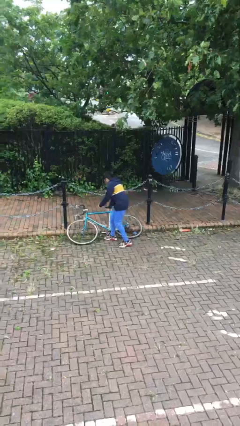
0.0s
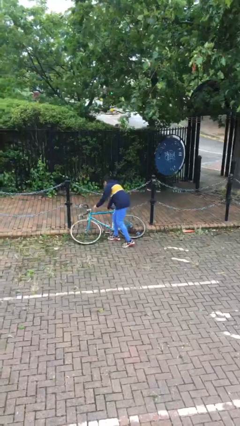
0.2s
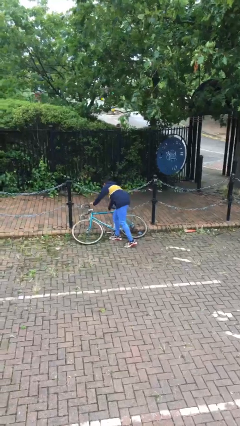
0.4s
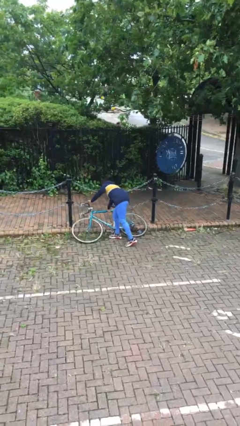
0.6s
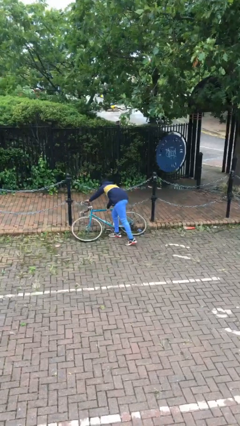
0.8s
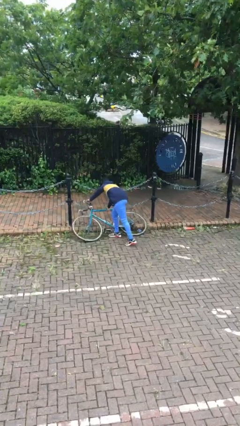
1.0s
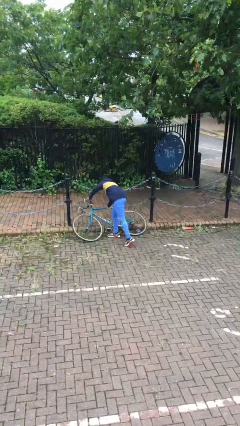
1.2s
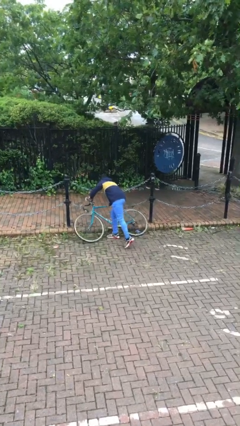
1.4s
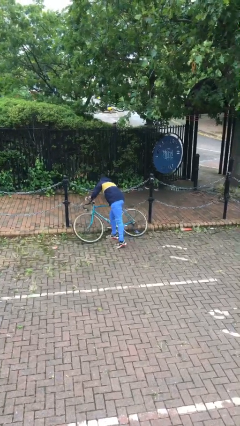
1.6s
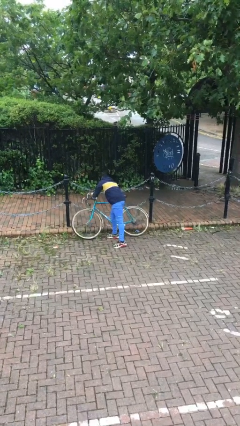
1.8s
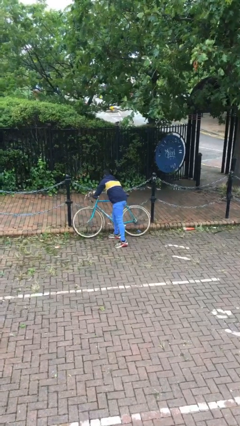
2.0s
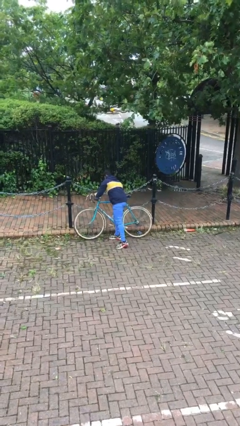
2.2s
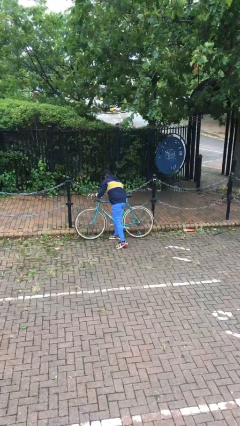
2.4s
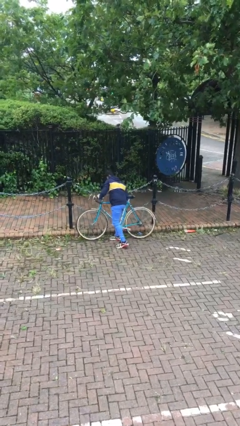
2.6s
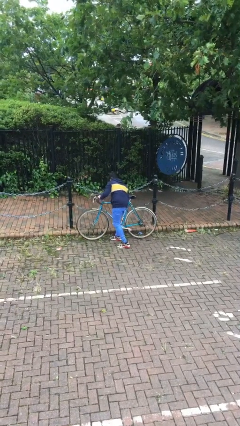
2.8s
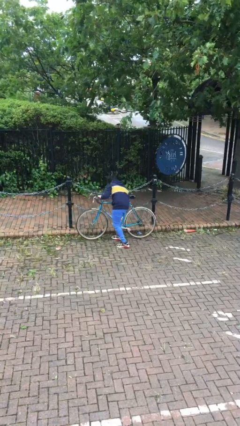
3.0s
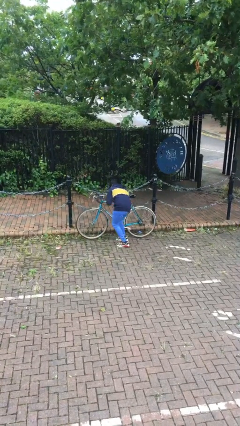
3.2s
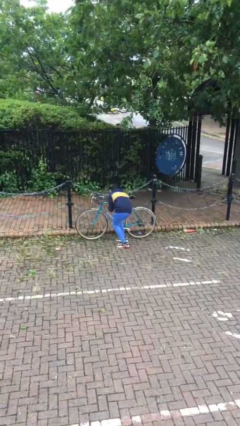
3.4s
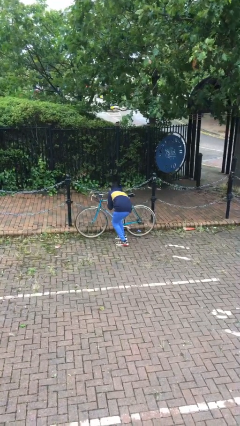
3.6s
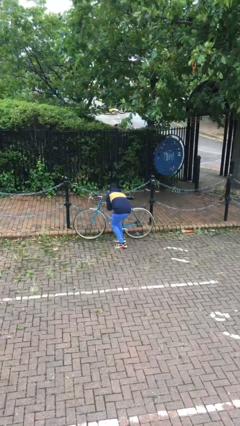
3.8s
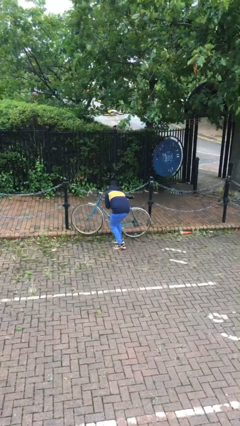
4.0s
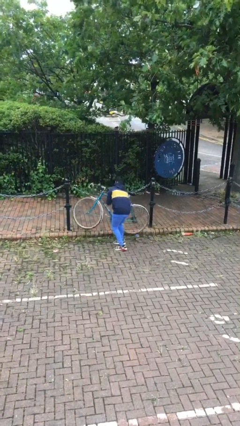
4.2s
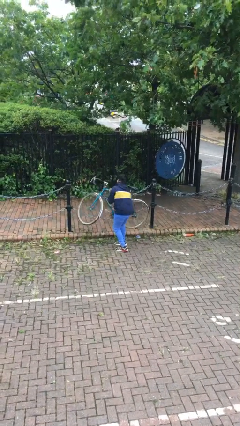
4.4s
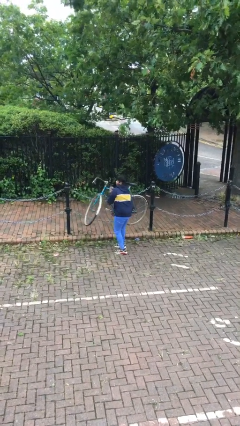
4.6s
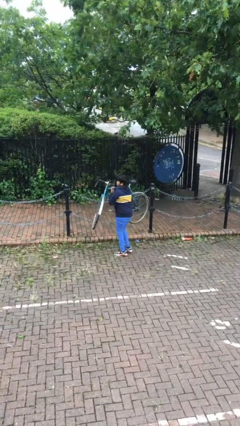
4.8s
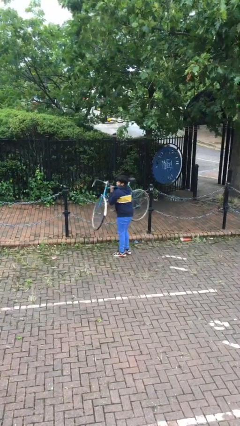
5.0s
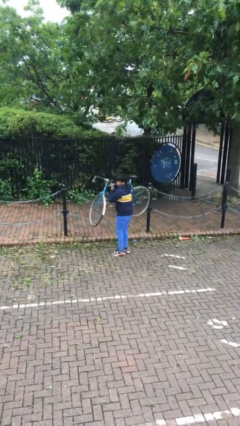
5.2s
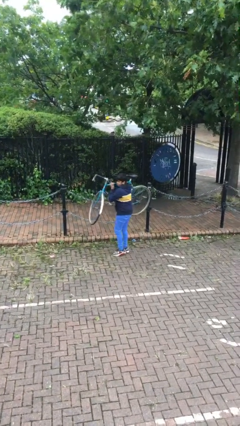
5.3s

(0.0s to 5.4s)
person picks up object from floor

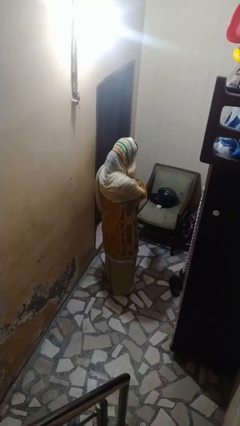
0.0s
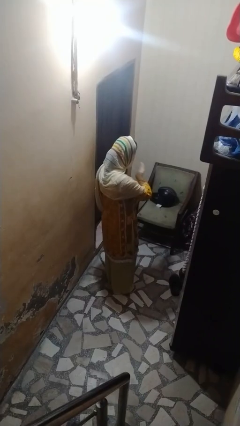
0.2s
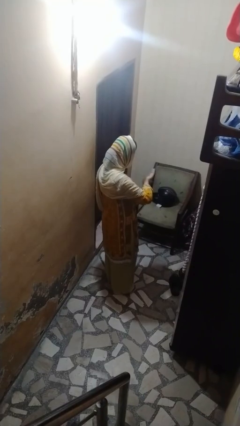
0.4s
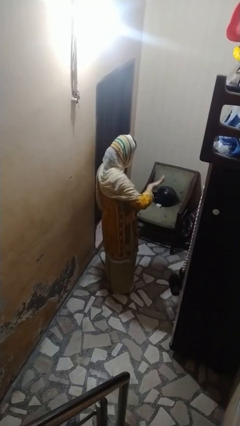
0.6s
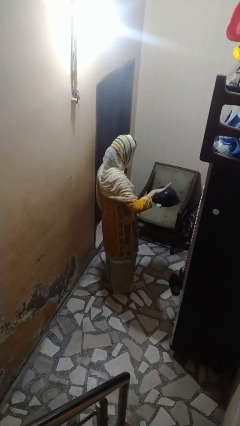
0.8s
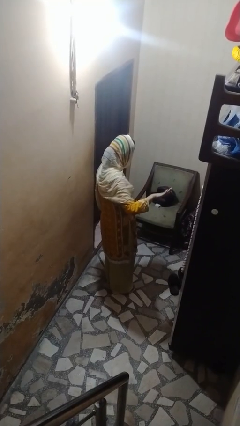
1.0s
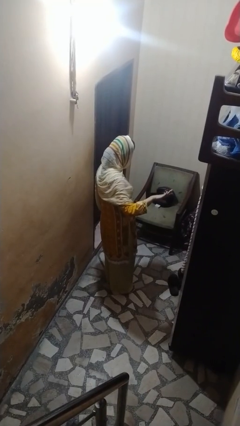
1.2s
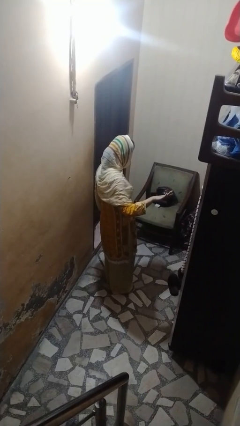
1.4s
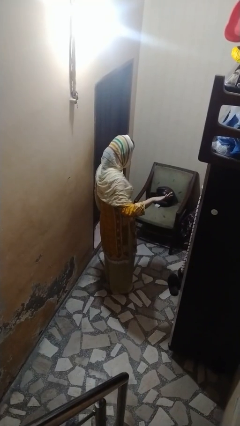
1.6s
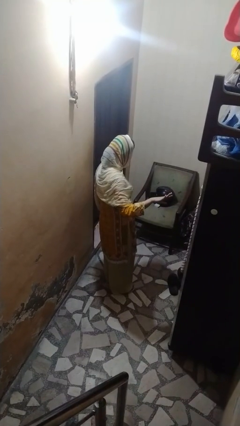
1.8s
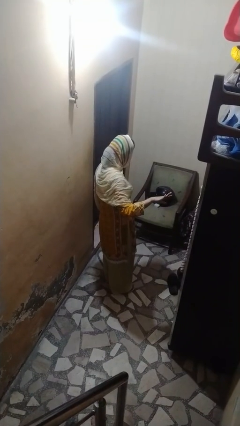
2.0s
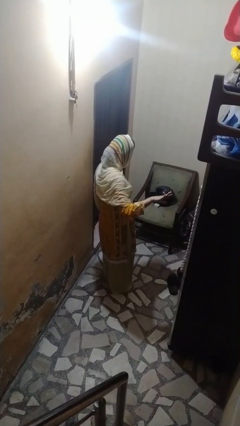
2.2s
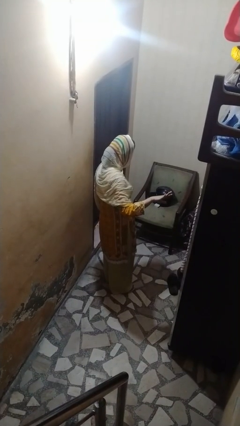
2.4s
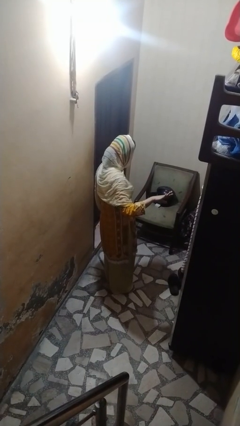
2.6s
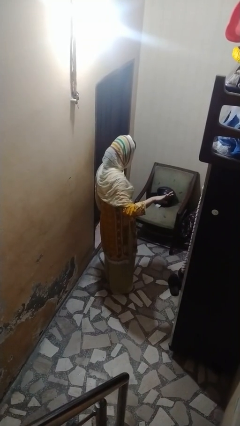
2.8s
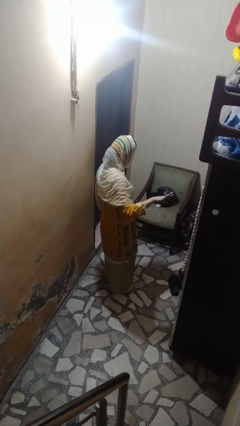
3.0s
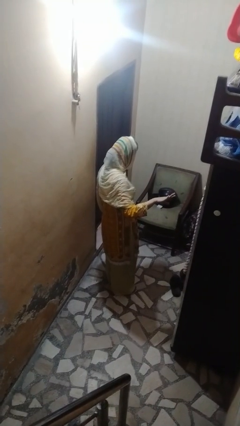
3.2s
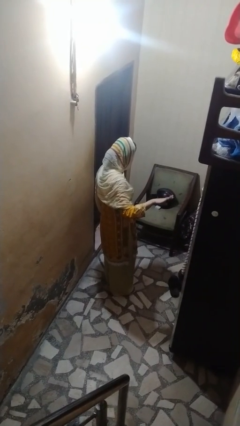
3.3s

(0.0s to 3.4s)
person gestures swipe right

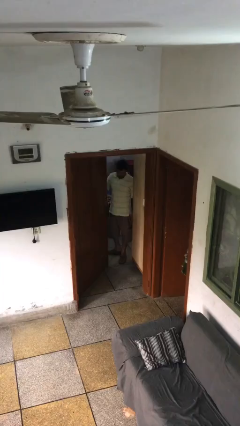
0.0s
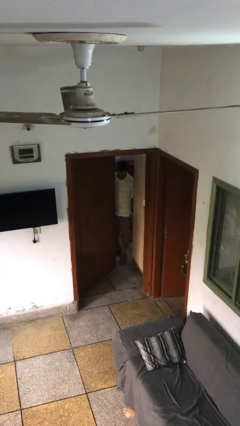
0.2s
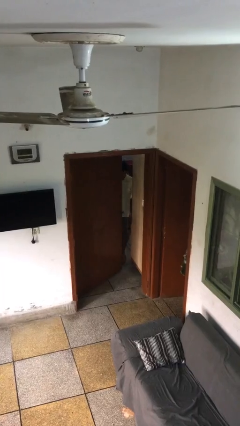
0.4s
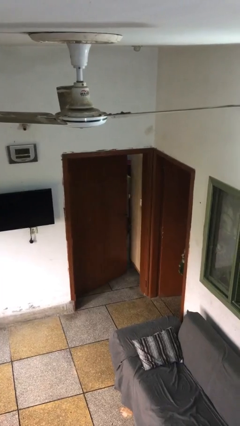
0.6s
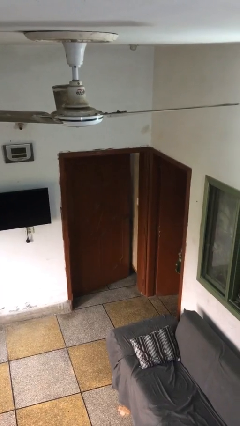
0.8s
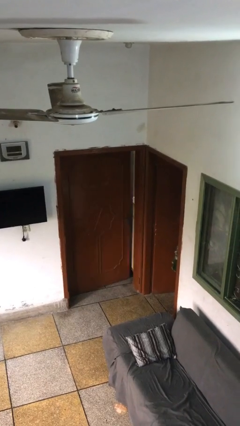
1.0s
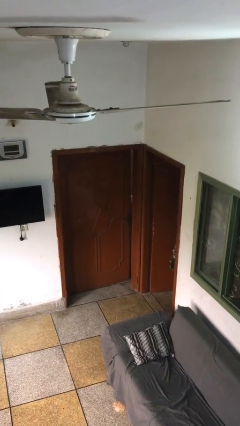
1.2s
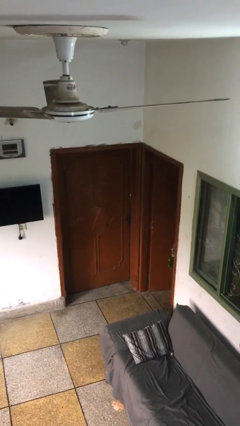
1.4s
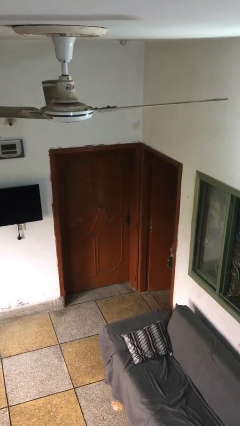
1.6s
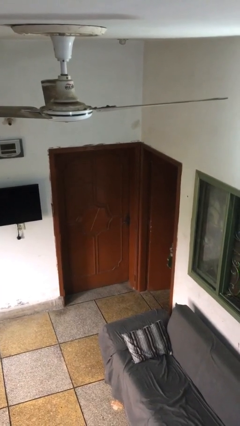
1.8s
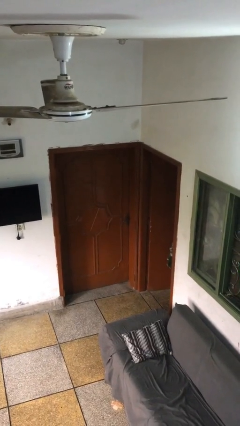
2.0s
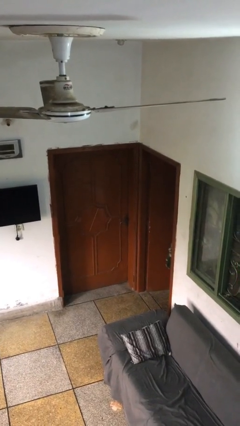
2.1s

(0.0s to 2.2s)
person closes facility door

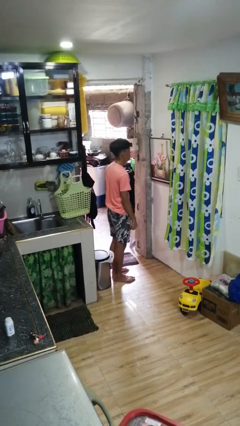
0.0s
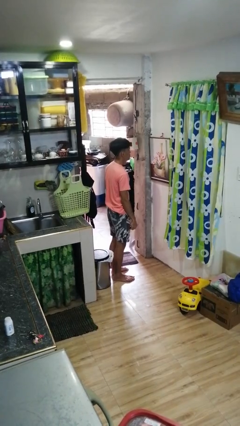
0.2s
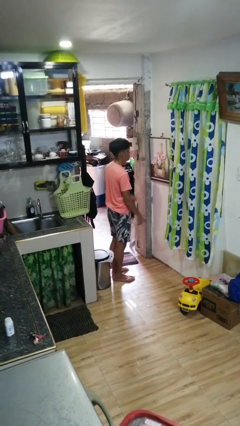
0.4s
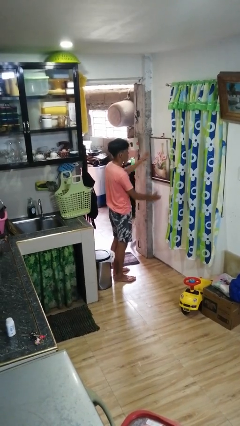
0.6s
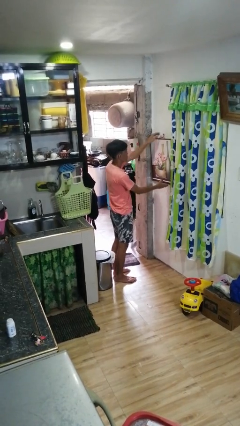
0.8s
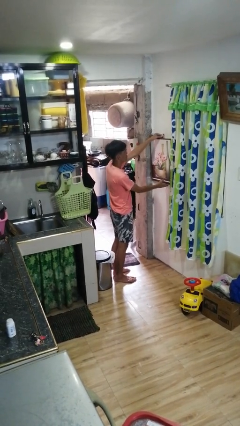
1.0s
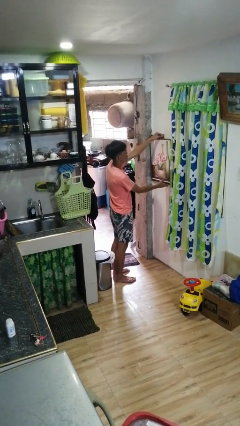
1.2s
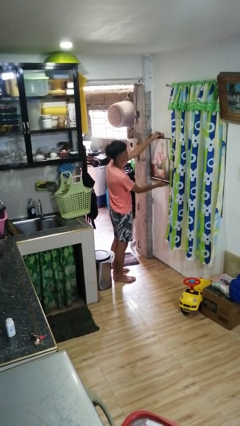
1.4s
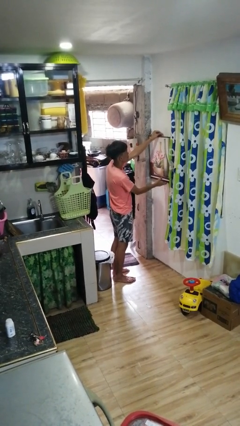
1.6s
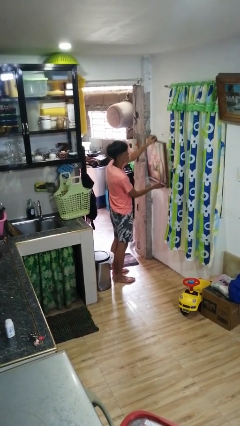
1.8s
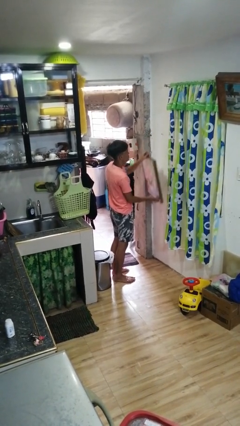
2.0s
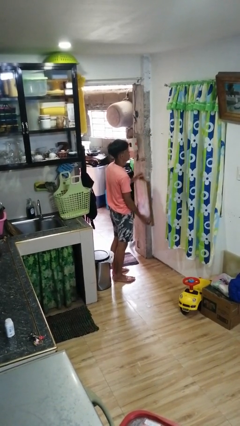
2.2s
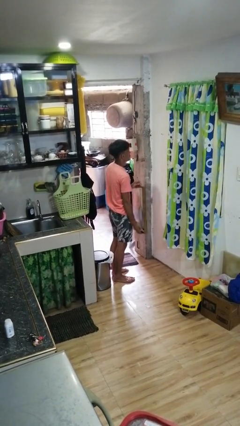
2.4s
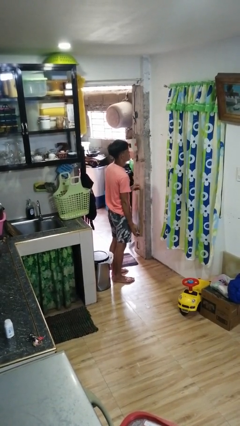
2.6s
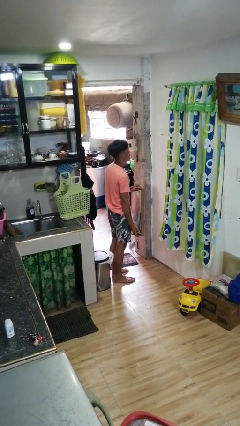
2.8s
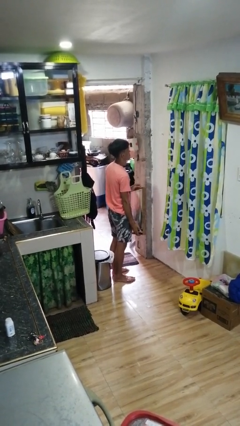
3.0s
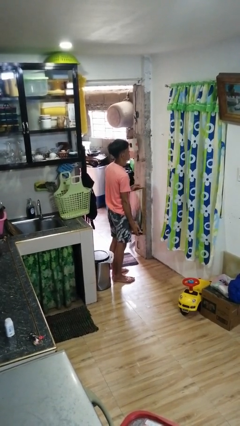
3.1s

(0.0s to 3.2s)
person takes down picture frame

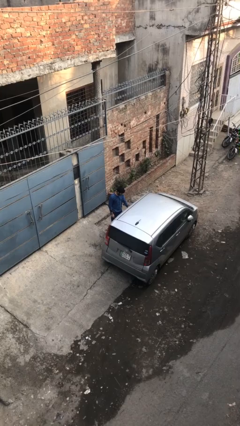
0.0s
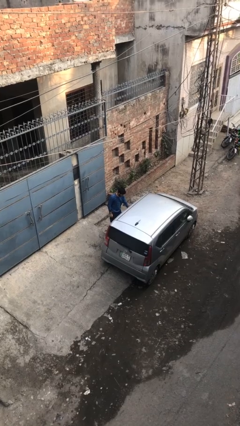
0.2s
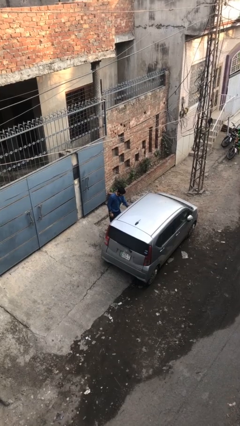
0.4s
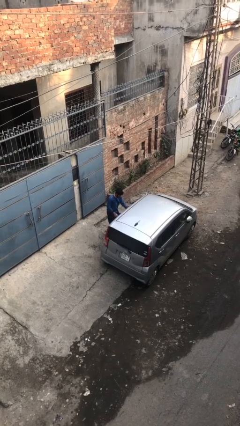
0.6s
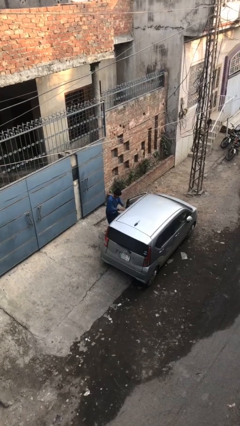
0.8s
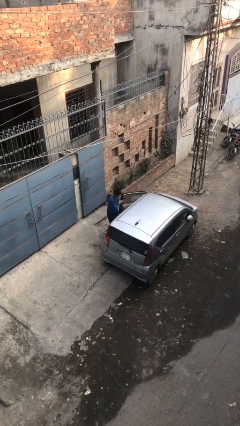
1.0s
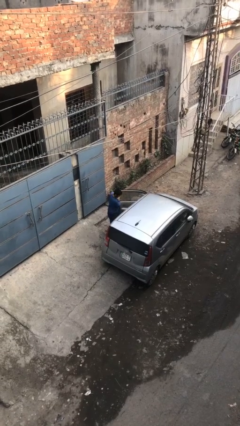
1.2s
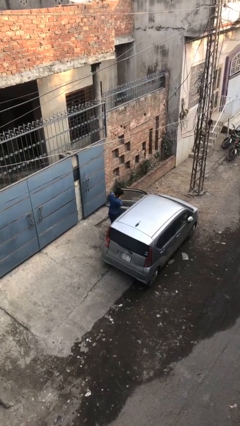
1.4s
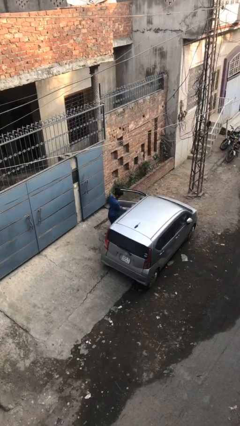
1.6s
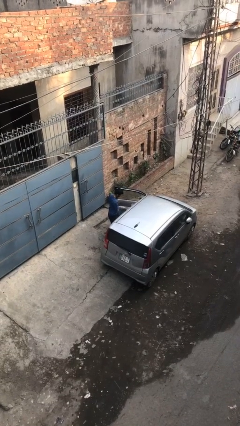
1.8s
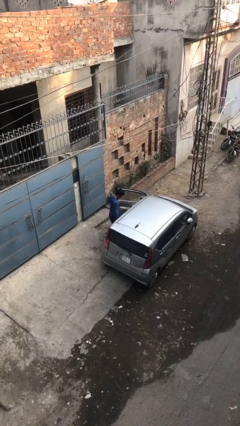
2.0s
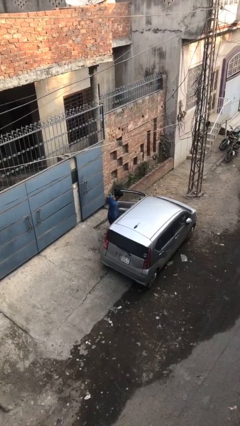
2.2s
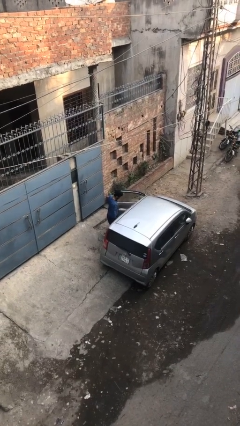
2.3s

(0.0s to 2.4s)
person opens car door

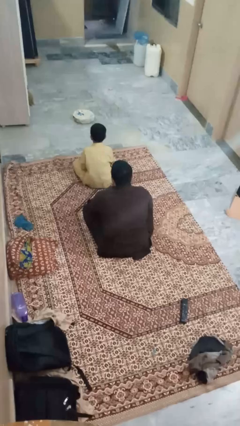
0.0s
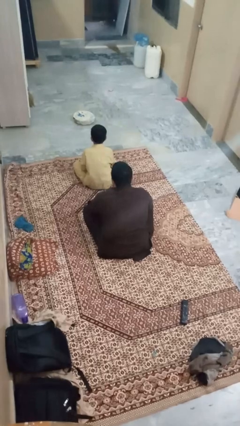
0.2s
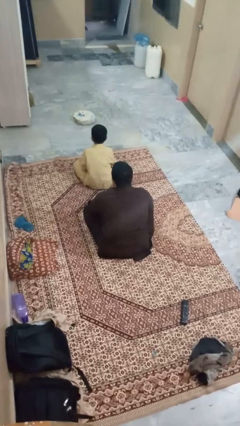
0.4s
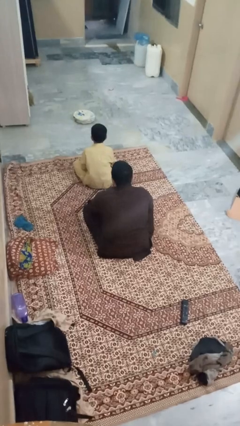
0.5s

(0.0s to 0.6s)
person brushes hair of person

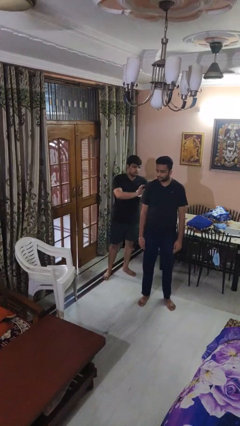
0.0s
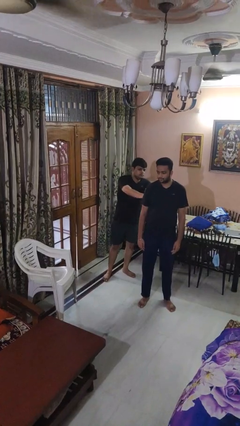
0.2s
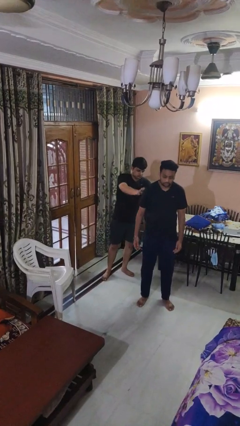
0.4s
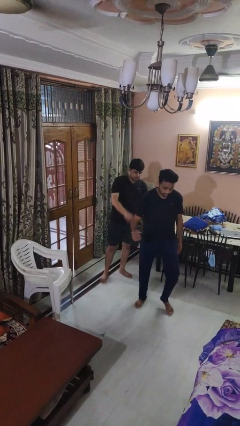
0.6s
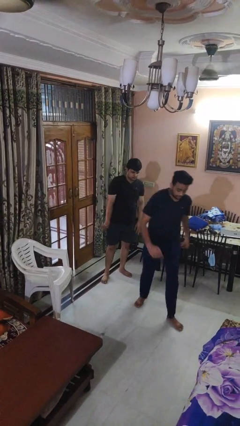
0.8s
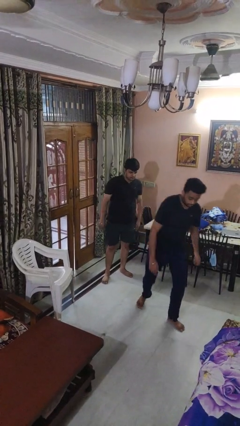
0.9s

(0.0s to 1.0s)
person shoves person
